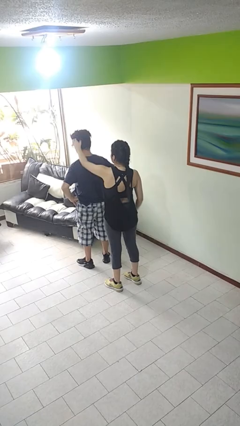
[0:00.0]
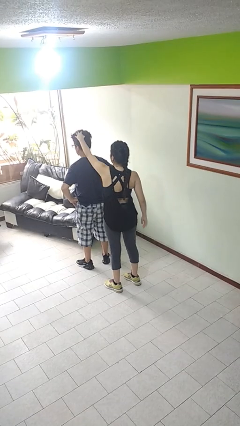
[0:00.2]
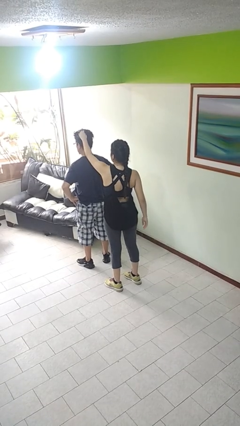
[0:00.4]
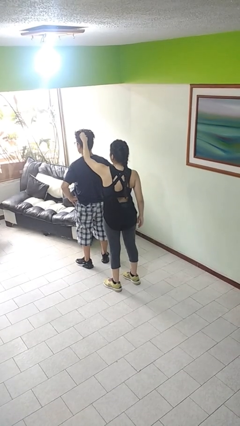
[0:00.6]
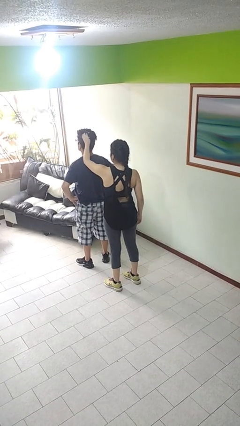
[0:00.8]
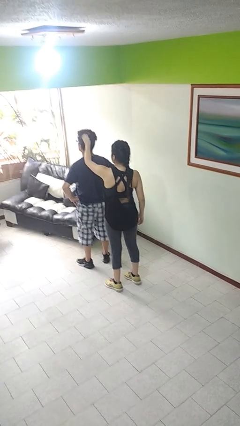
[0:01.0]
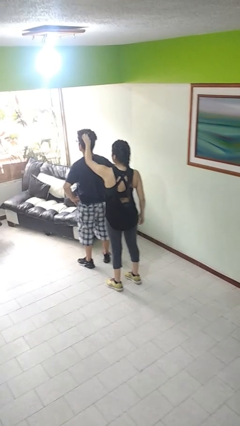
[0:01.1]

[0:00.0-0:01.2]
person grabs person by hair

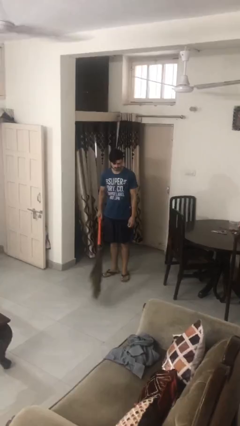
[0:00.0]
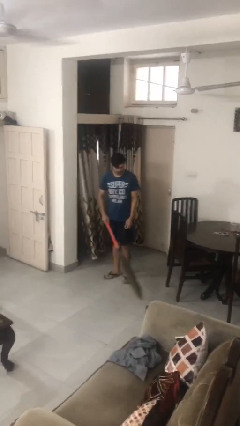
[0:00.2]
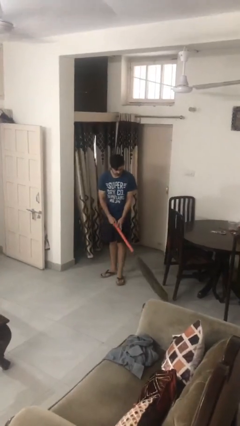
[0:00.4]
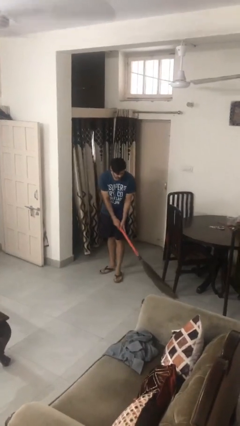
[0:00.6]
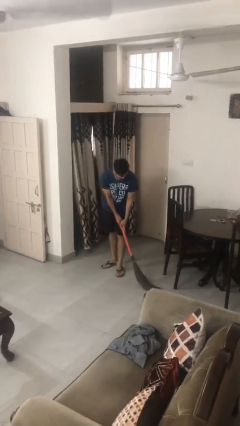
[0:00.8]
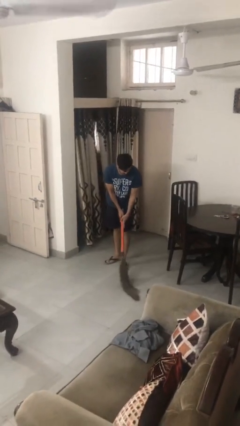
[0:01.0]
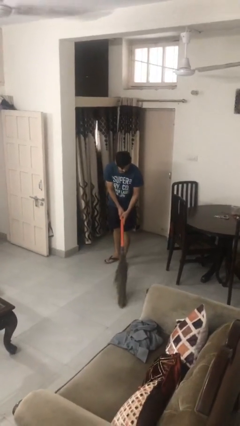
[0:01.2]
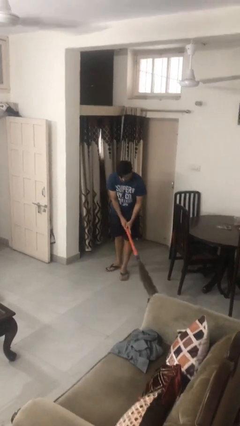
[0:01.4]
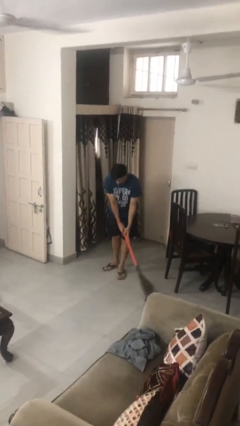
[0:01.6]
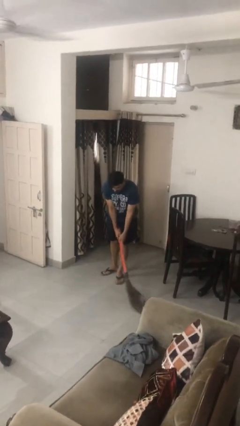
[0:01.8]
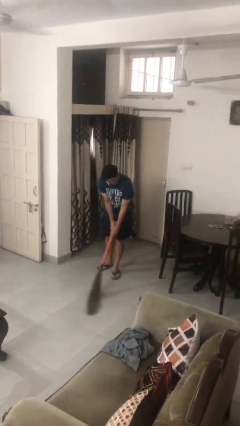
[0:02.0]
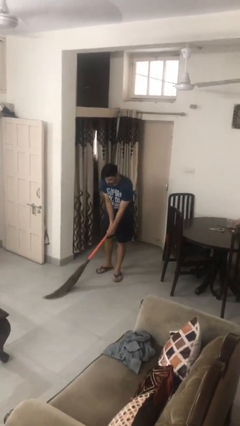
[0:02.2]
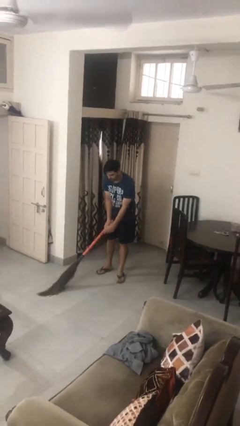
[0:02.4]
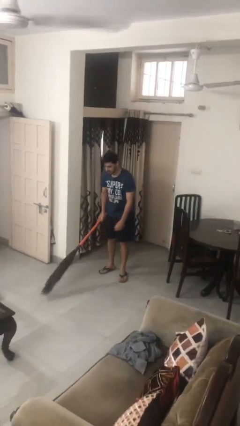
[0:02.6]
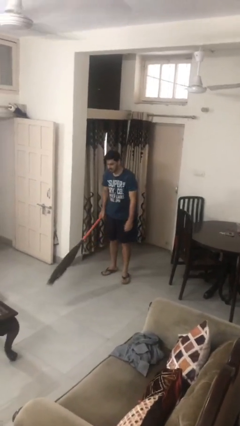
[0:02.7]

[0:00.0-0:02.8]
person sweeps floor

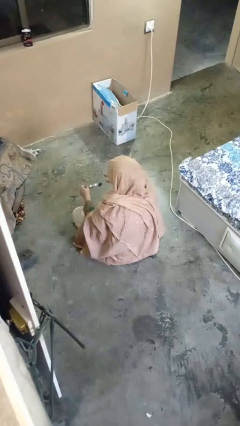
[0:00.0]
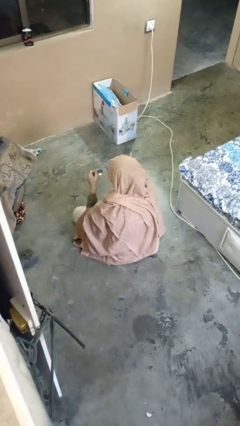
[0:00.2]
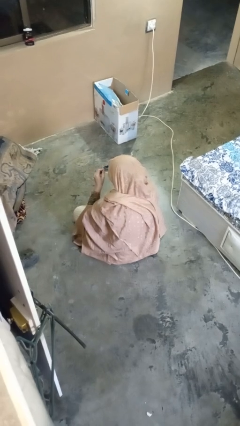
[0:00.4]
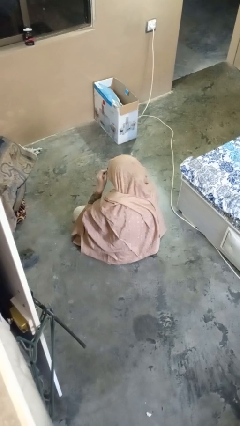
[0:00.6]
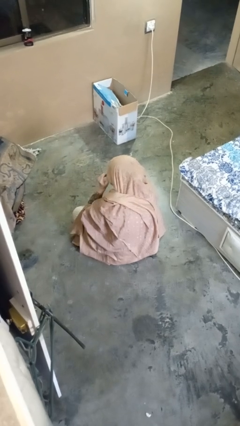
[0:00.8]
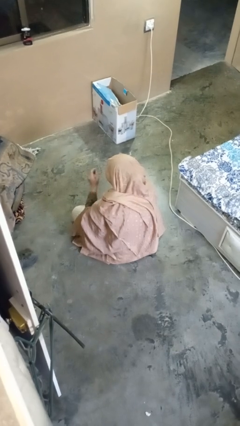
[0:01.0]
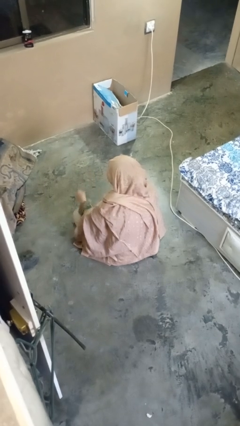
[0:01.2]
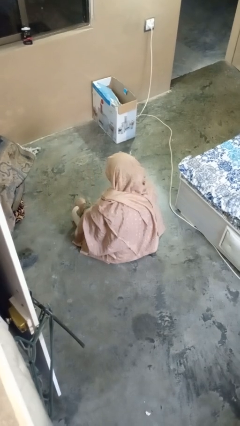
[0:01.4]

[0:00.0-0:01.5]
person puts on glasses

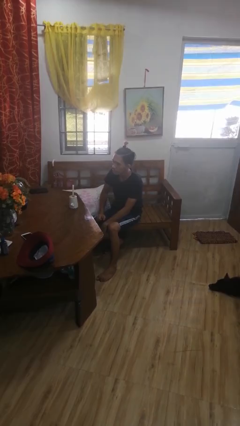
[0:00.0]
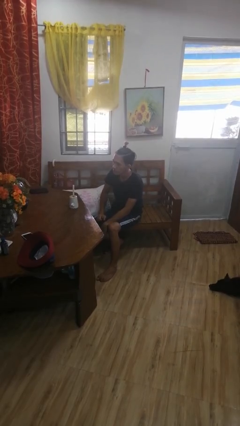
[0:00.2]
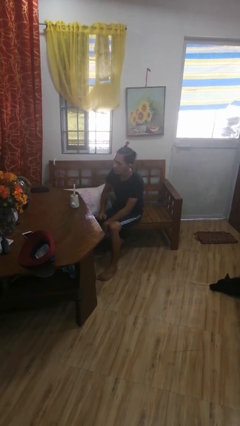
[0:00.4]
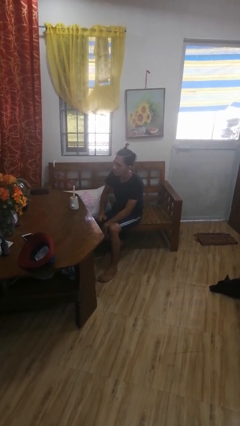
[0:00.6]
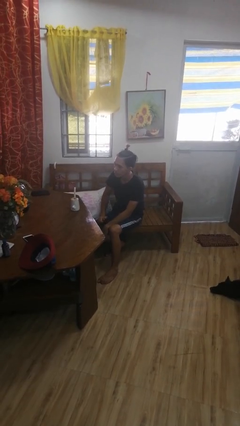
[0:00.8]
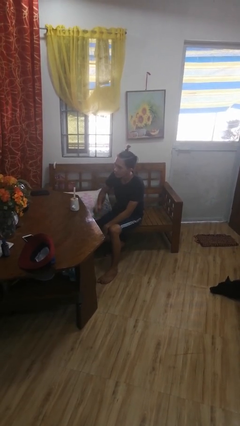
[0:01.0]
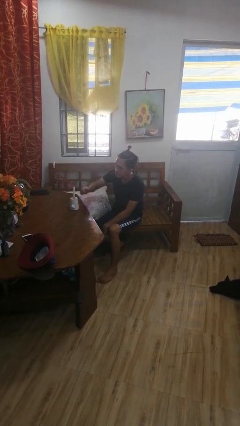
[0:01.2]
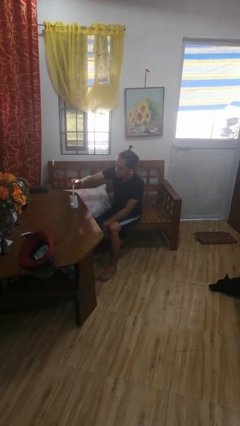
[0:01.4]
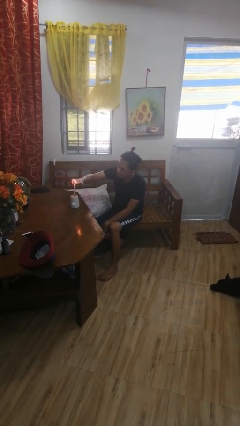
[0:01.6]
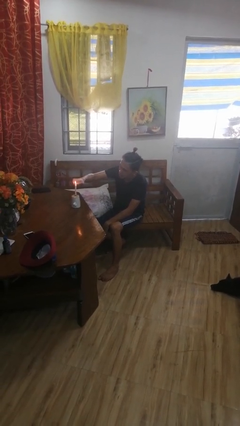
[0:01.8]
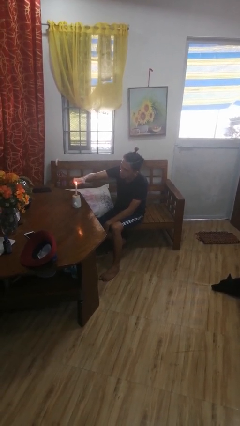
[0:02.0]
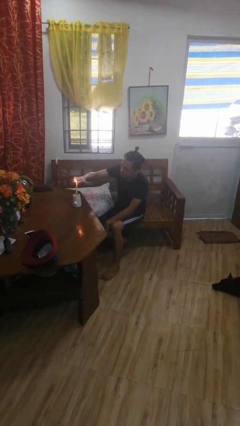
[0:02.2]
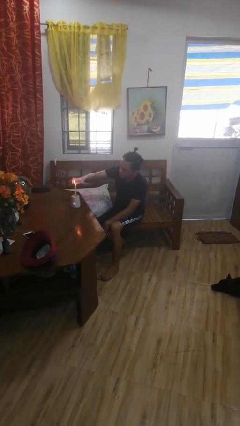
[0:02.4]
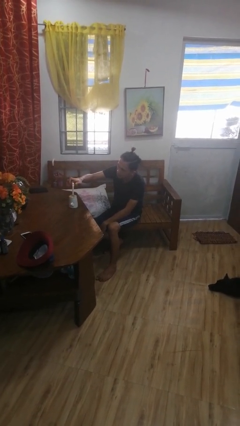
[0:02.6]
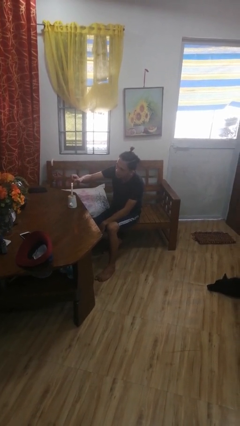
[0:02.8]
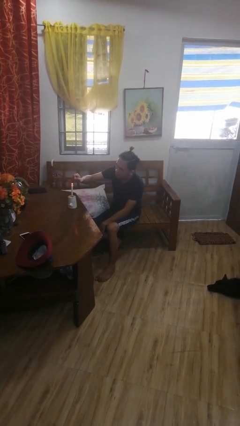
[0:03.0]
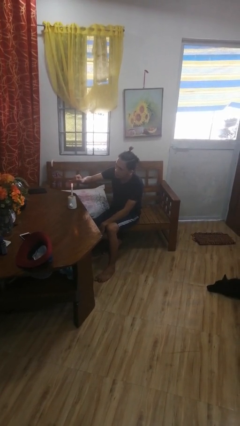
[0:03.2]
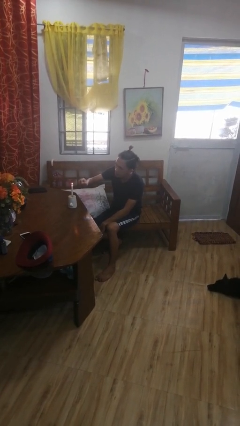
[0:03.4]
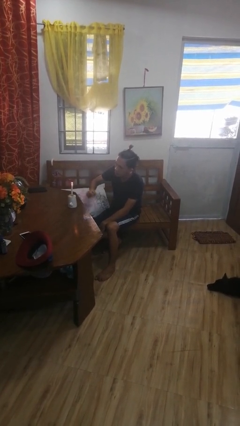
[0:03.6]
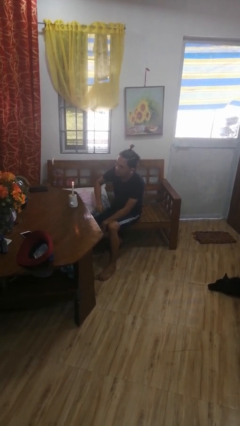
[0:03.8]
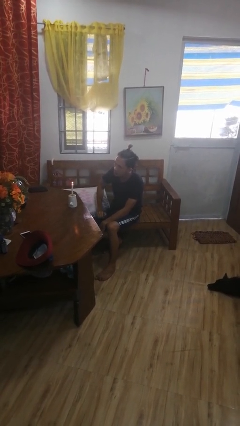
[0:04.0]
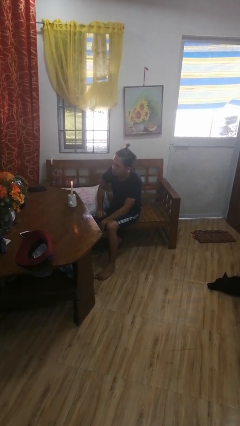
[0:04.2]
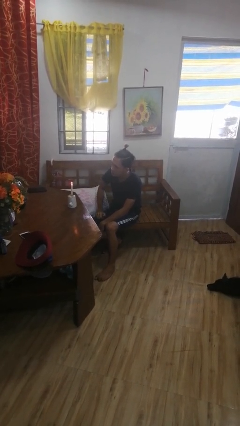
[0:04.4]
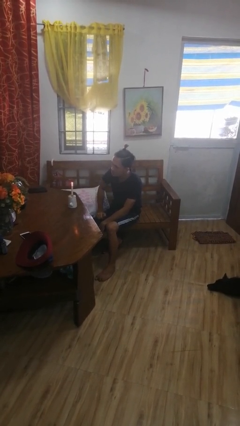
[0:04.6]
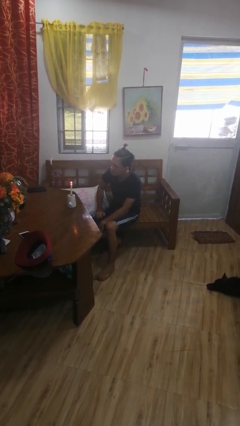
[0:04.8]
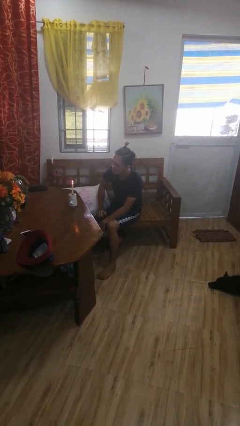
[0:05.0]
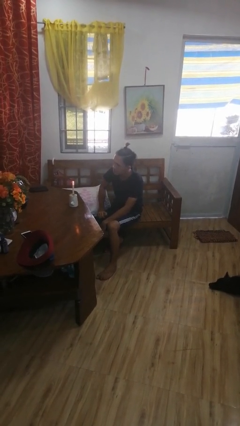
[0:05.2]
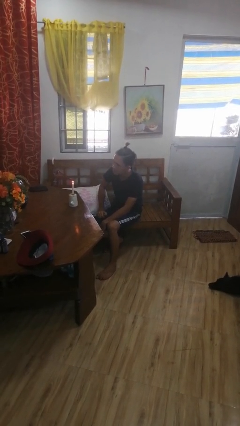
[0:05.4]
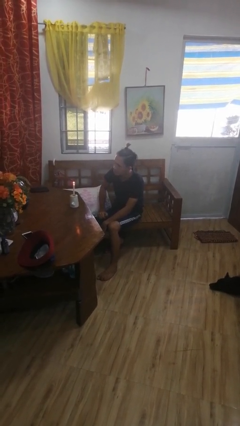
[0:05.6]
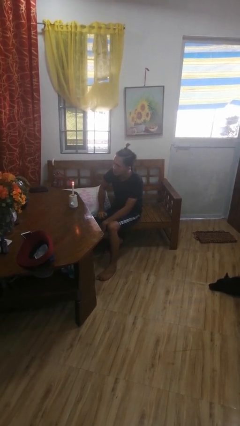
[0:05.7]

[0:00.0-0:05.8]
person lights candle

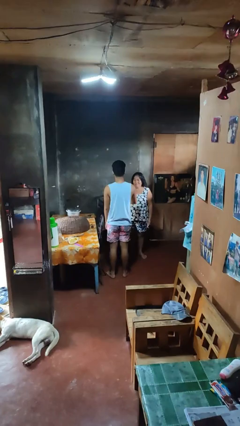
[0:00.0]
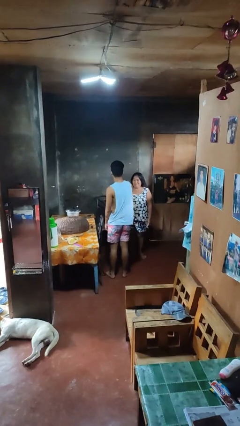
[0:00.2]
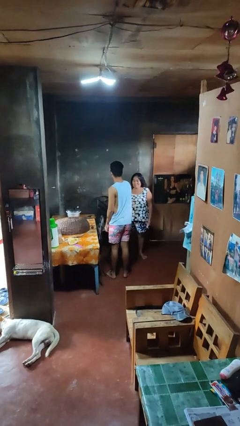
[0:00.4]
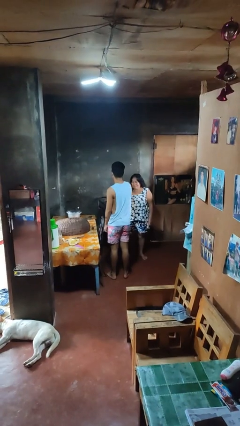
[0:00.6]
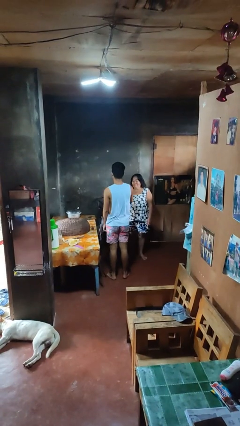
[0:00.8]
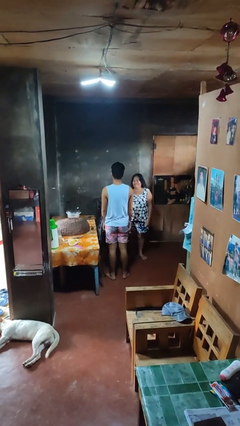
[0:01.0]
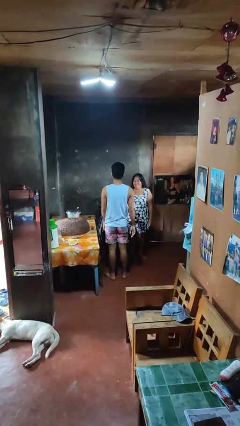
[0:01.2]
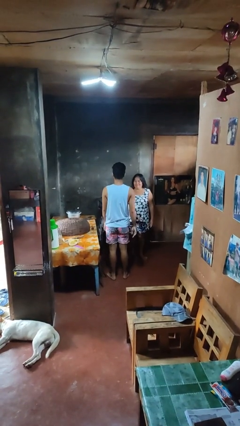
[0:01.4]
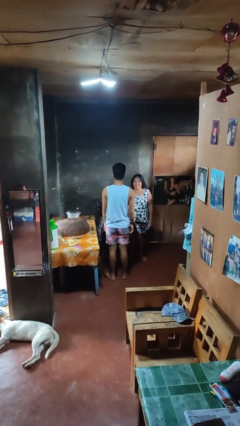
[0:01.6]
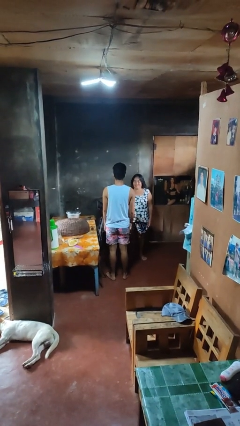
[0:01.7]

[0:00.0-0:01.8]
person shoves person

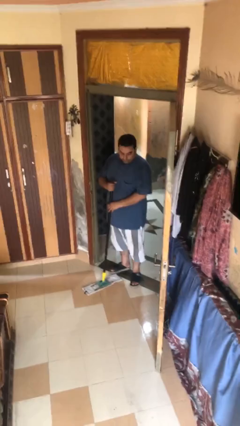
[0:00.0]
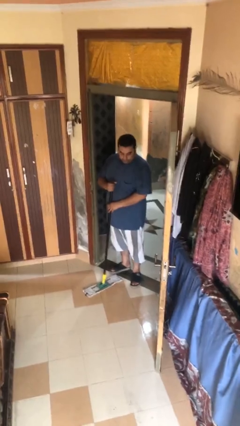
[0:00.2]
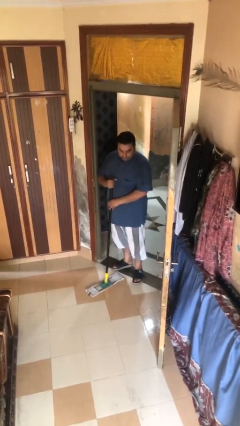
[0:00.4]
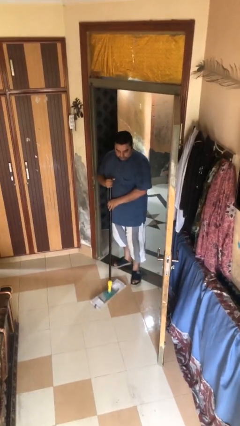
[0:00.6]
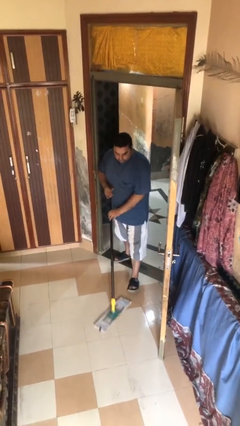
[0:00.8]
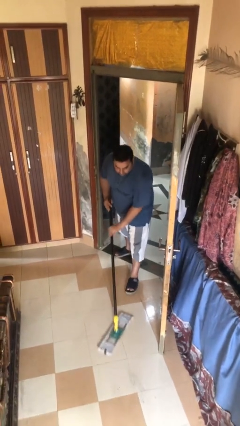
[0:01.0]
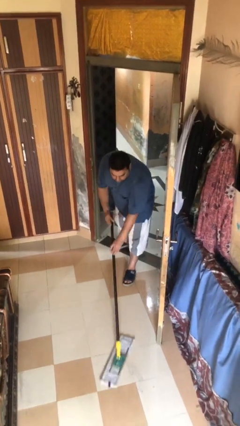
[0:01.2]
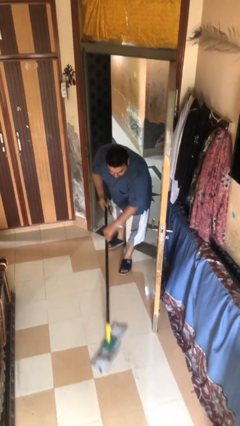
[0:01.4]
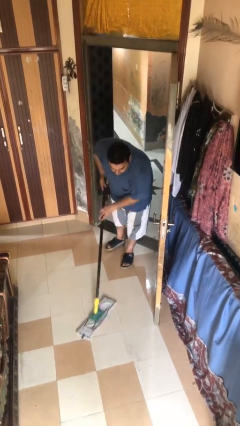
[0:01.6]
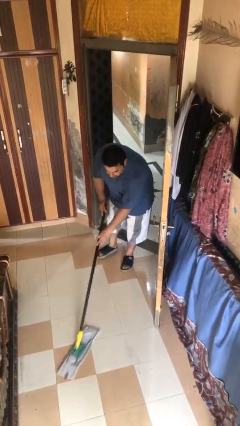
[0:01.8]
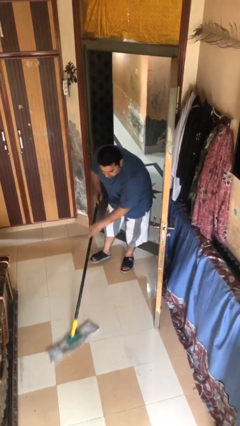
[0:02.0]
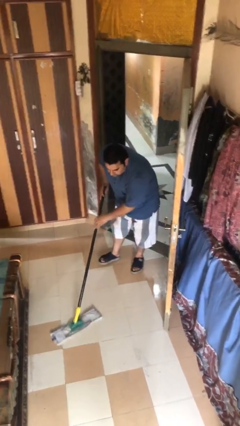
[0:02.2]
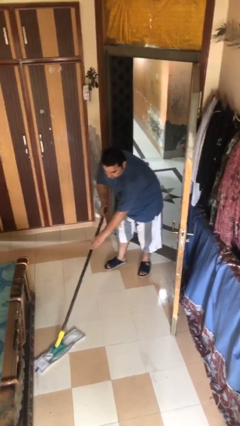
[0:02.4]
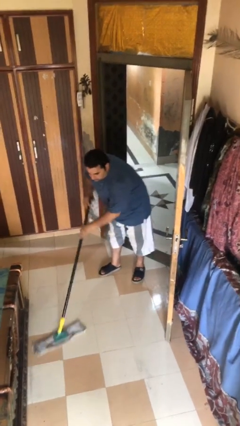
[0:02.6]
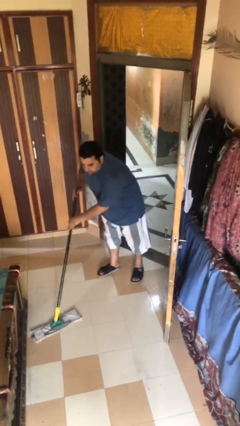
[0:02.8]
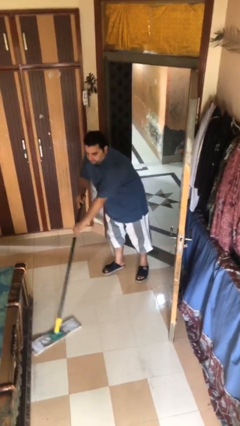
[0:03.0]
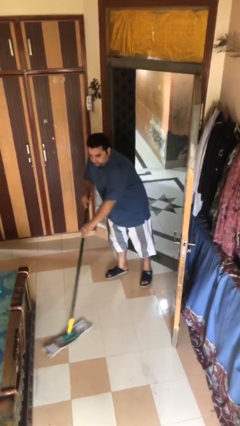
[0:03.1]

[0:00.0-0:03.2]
person mops

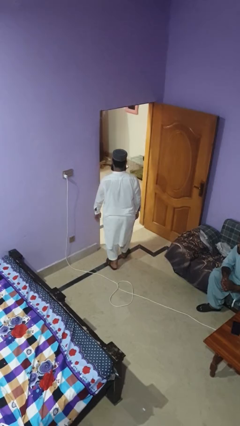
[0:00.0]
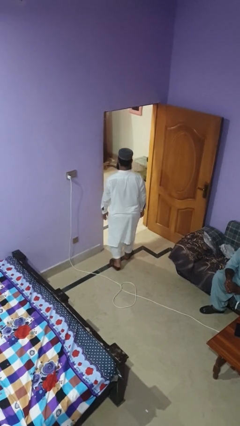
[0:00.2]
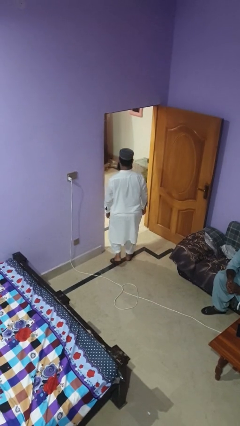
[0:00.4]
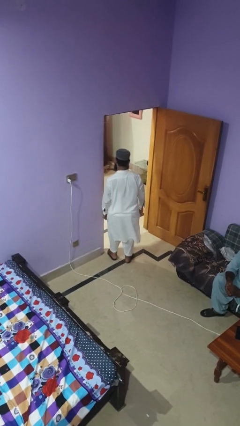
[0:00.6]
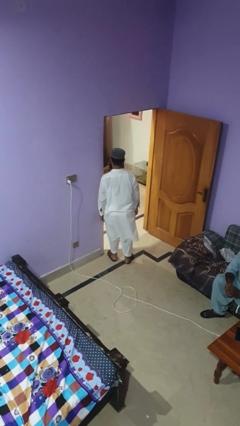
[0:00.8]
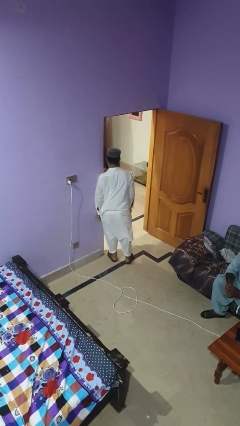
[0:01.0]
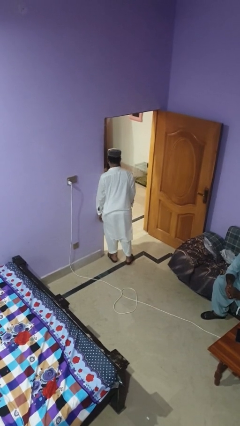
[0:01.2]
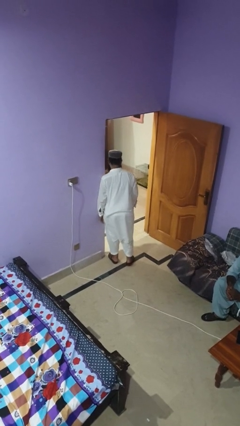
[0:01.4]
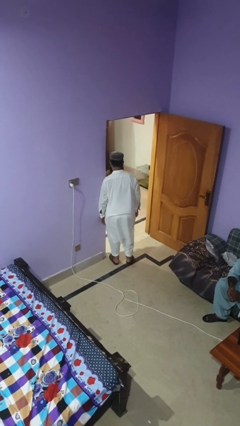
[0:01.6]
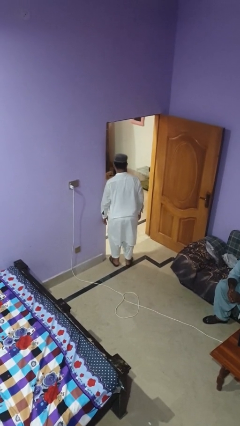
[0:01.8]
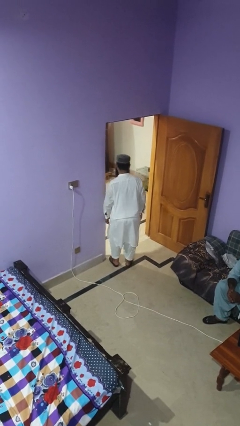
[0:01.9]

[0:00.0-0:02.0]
person bumps into wall
